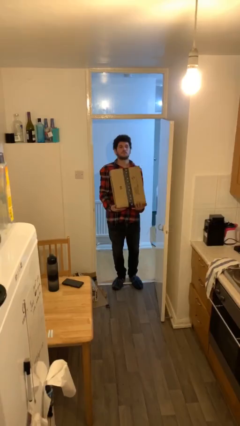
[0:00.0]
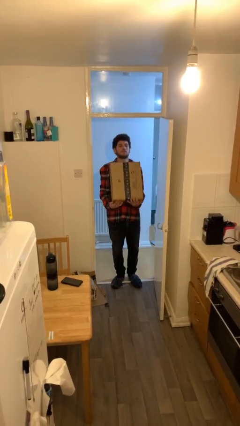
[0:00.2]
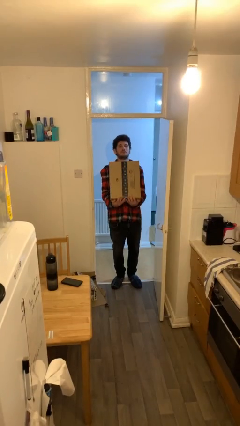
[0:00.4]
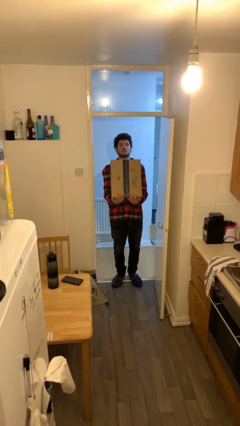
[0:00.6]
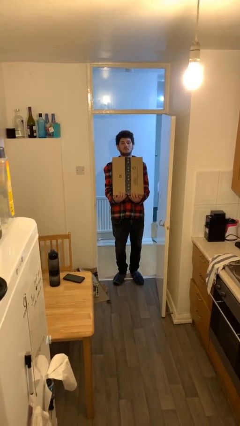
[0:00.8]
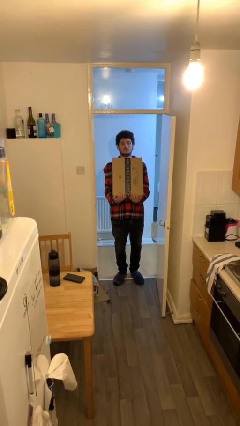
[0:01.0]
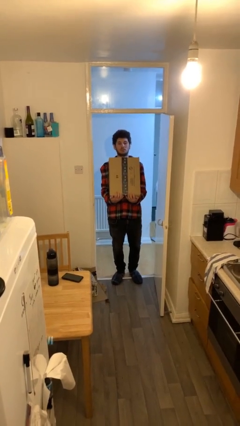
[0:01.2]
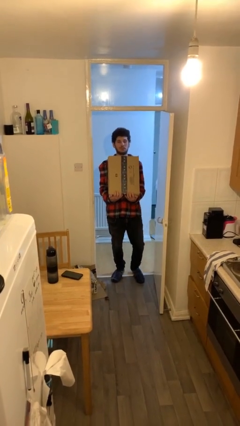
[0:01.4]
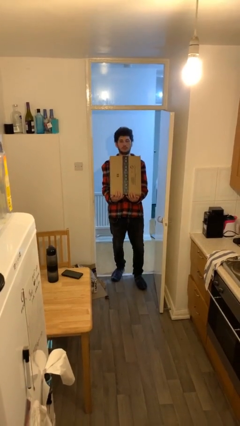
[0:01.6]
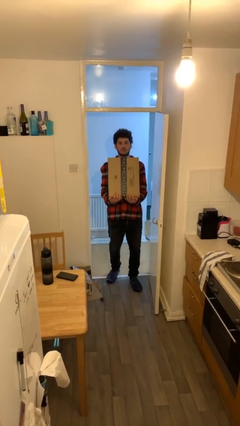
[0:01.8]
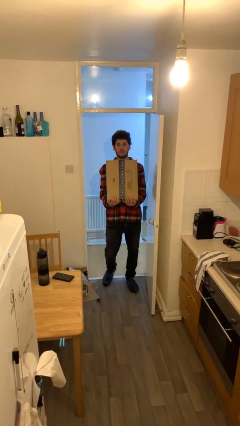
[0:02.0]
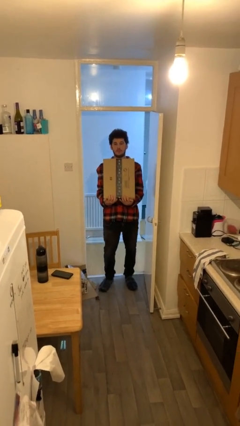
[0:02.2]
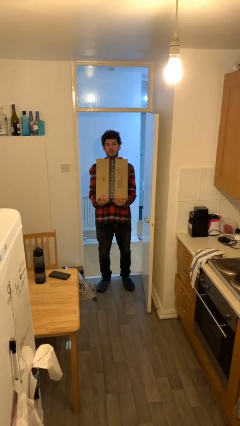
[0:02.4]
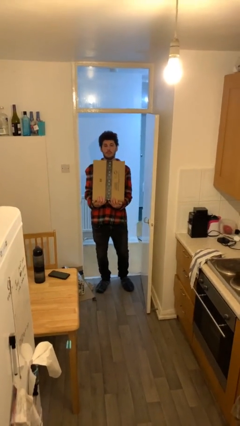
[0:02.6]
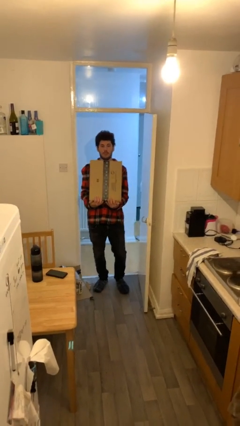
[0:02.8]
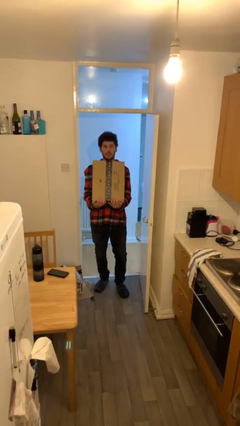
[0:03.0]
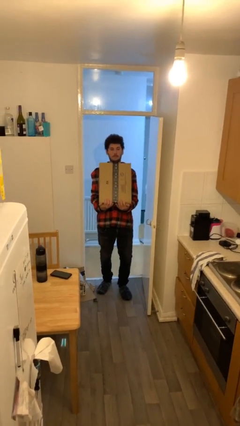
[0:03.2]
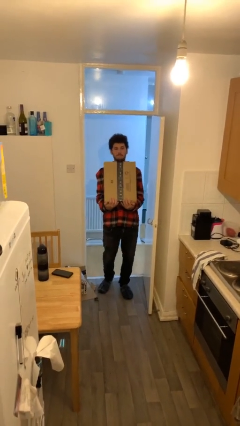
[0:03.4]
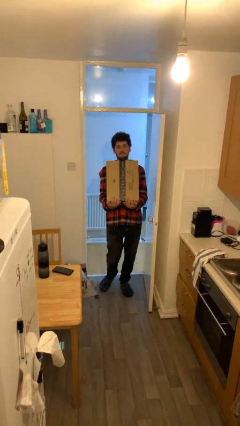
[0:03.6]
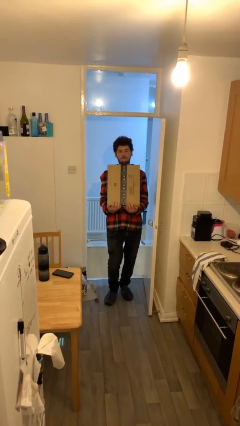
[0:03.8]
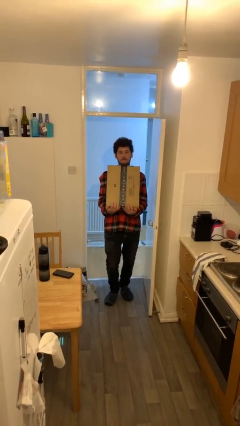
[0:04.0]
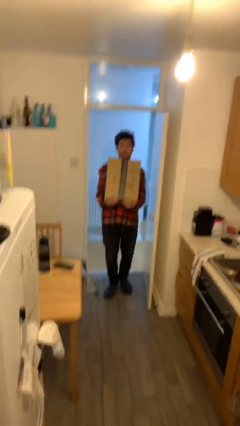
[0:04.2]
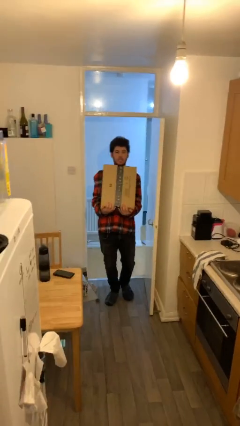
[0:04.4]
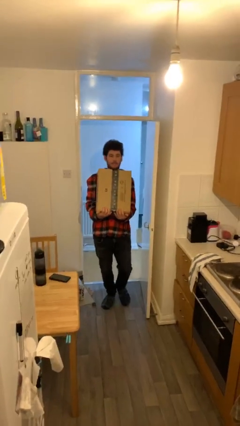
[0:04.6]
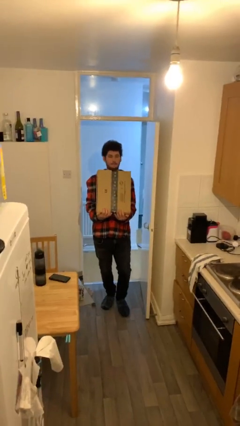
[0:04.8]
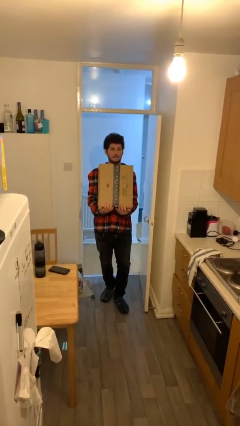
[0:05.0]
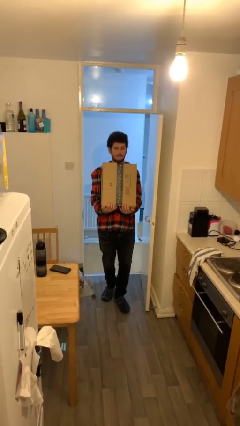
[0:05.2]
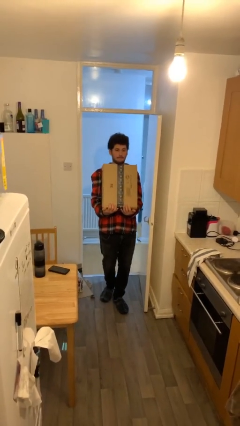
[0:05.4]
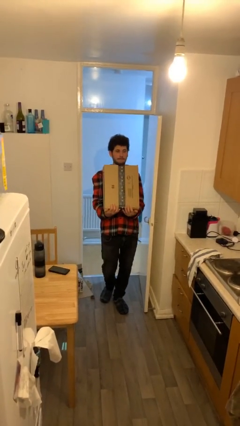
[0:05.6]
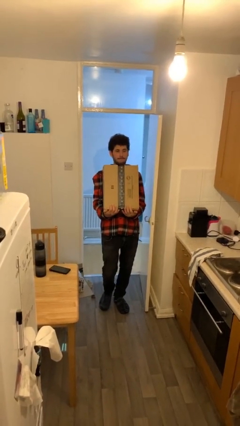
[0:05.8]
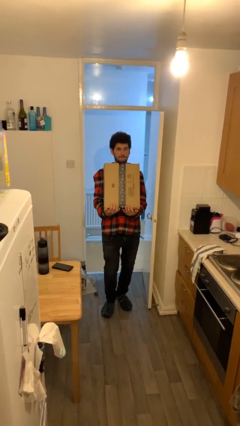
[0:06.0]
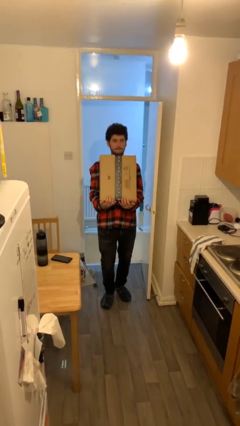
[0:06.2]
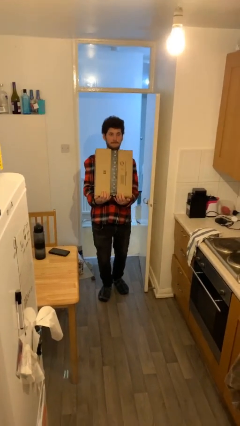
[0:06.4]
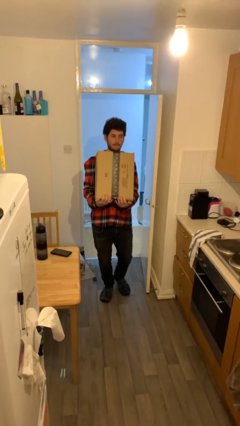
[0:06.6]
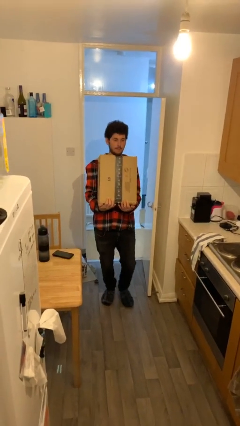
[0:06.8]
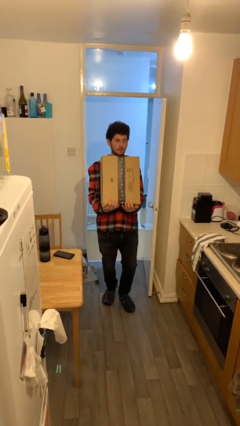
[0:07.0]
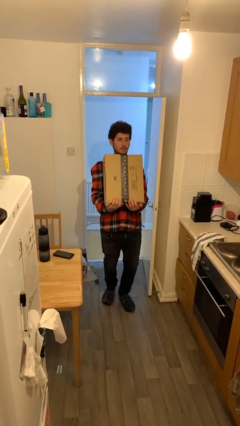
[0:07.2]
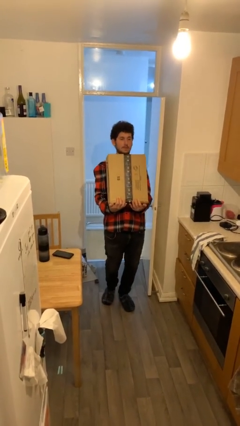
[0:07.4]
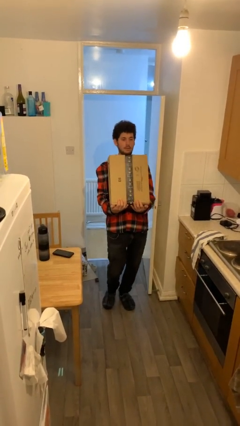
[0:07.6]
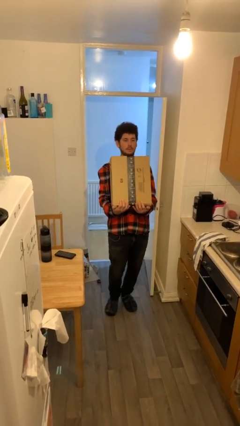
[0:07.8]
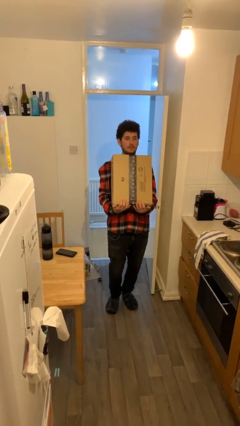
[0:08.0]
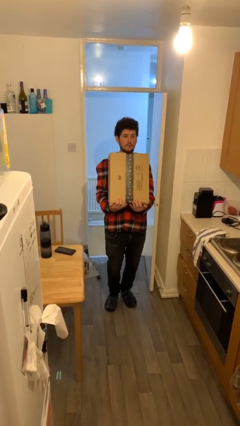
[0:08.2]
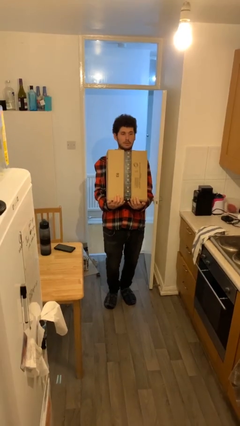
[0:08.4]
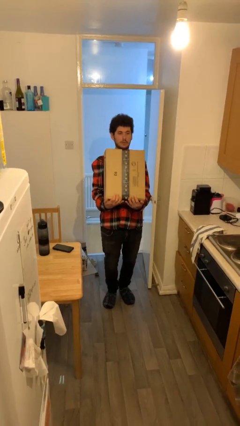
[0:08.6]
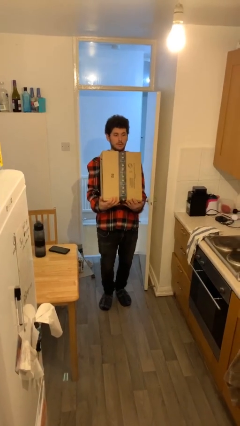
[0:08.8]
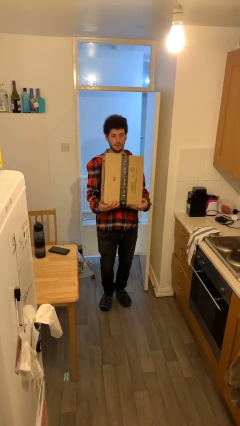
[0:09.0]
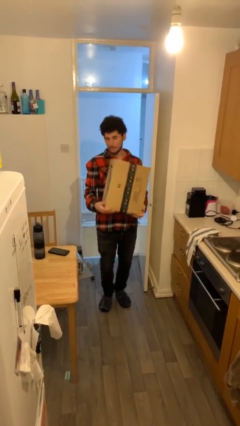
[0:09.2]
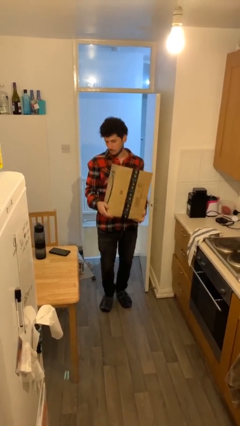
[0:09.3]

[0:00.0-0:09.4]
person carries heavy object

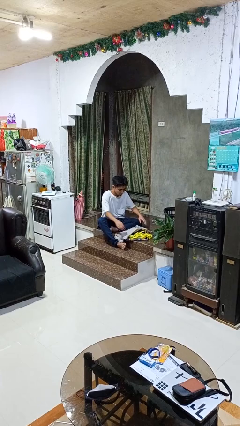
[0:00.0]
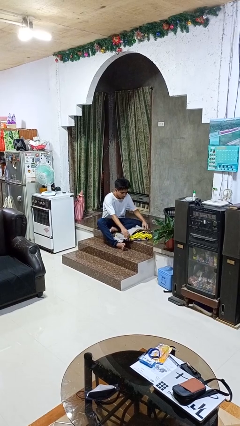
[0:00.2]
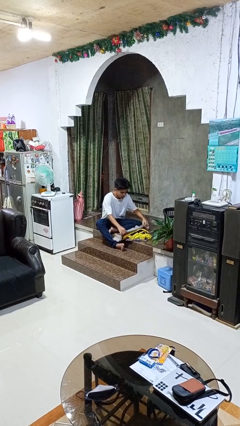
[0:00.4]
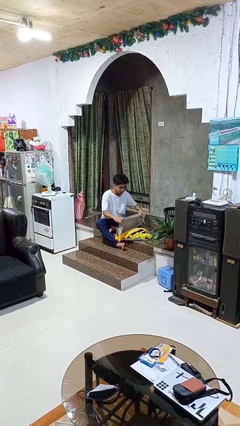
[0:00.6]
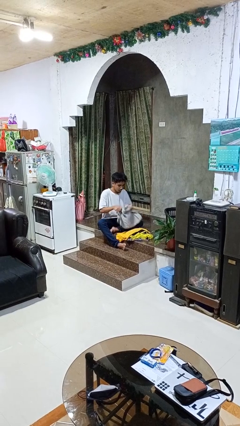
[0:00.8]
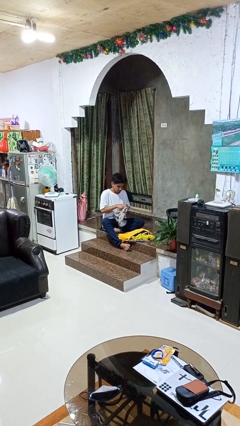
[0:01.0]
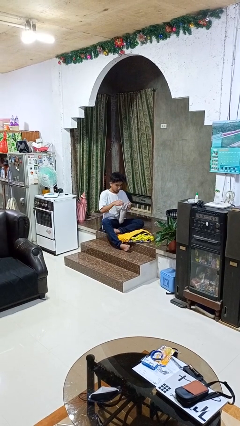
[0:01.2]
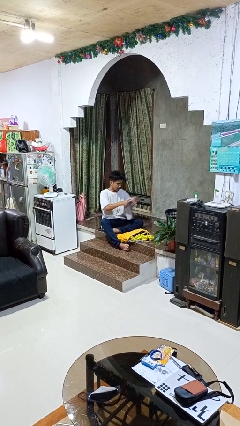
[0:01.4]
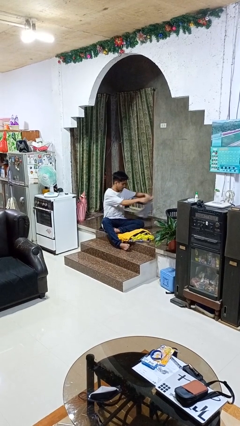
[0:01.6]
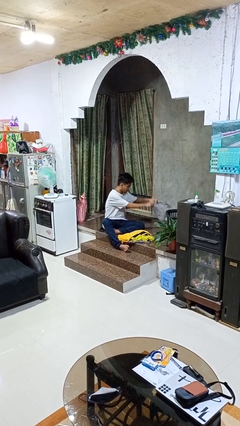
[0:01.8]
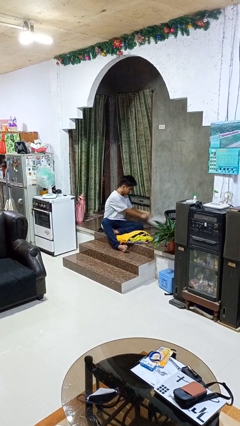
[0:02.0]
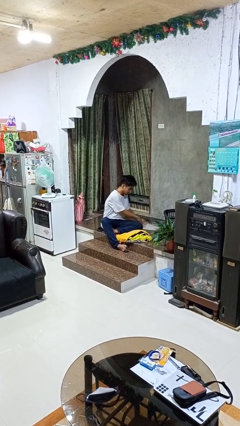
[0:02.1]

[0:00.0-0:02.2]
person folds shirt

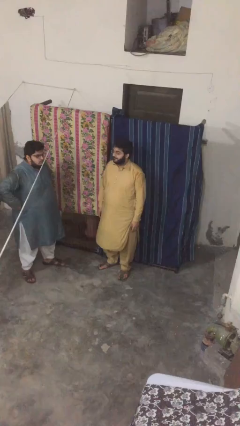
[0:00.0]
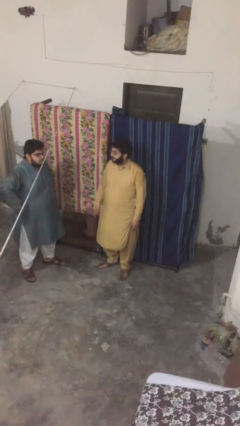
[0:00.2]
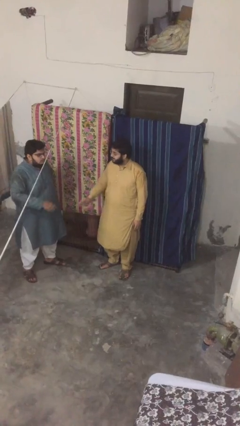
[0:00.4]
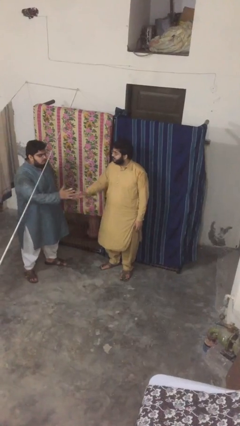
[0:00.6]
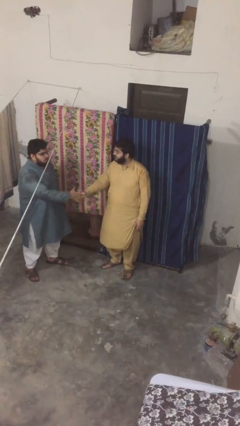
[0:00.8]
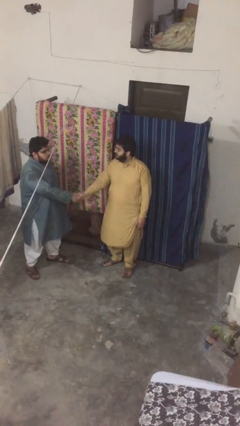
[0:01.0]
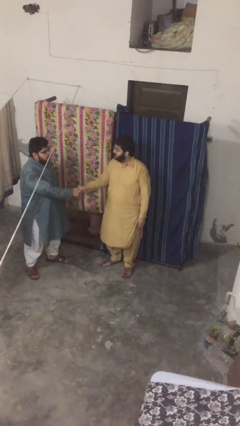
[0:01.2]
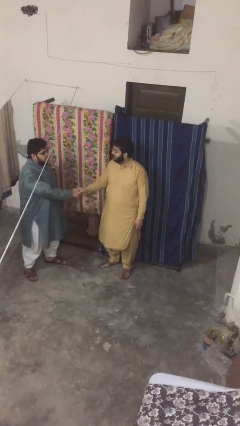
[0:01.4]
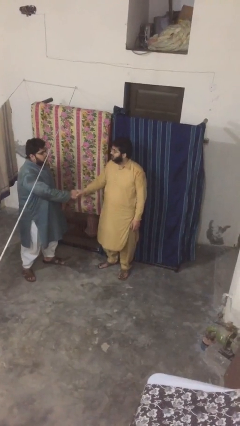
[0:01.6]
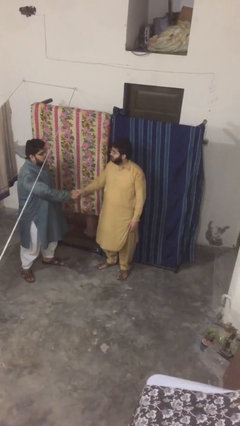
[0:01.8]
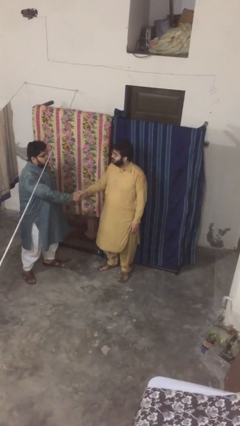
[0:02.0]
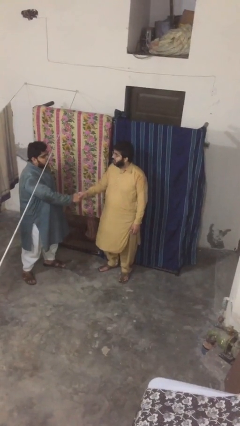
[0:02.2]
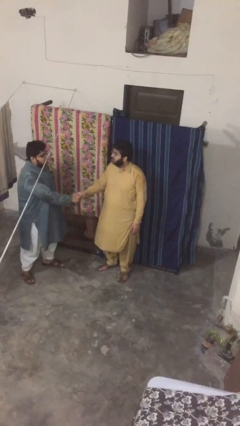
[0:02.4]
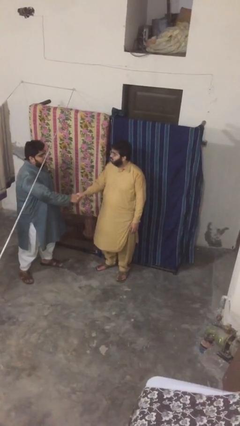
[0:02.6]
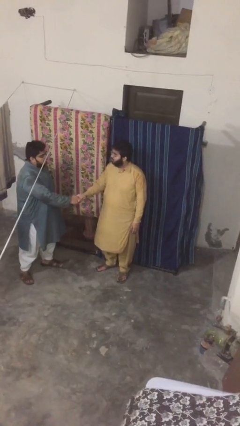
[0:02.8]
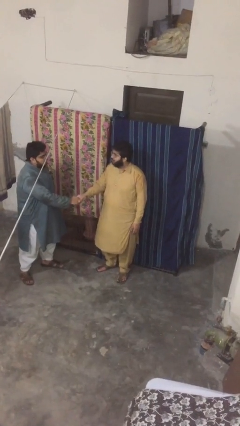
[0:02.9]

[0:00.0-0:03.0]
person shakes hand

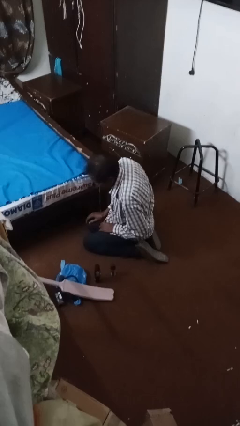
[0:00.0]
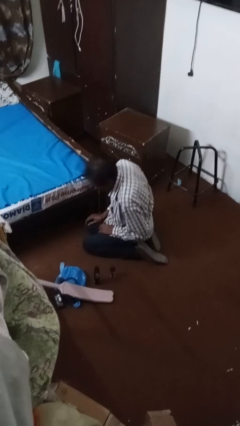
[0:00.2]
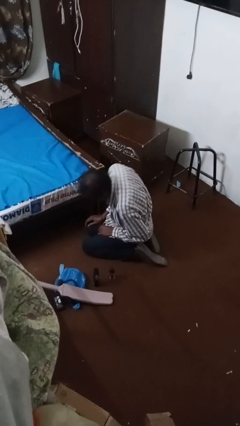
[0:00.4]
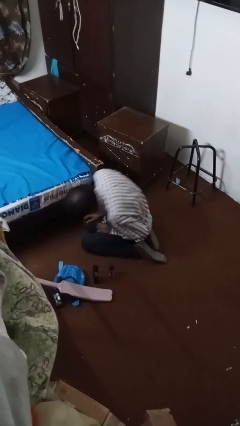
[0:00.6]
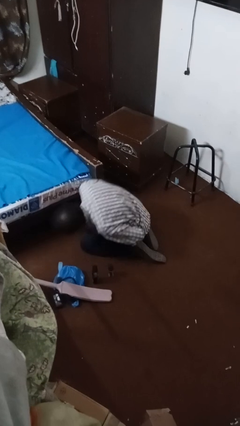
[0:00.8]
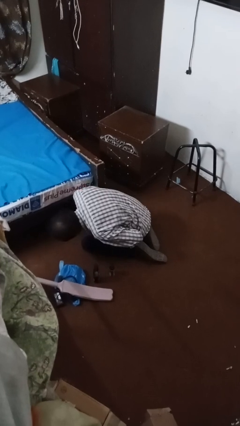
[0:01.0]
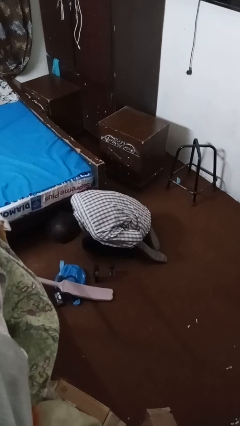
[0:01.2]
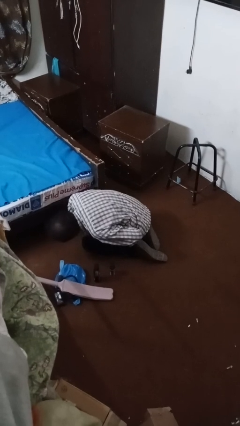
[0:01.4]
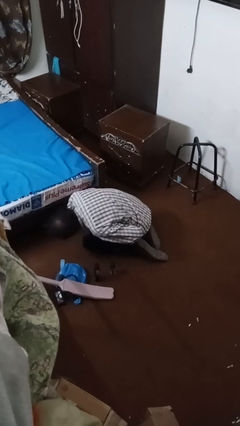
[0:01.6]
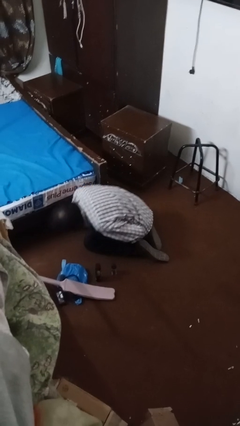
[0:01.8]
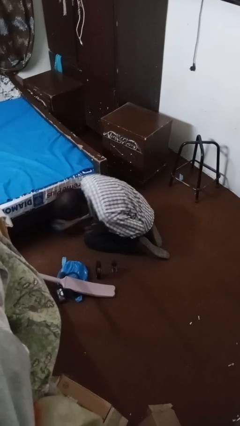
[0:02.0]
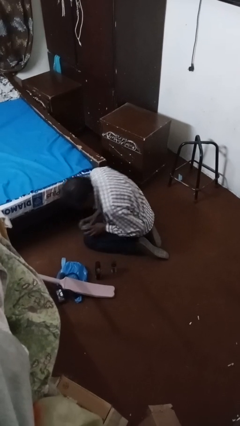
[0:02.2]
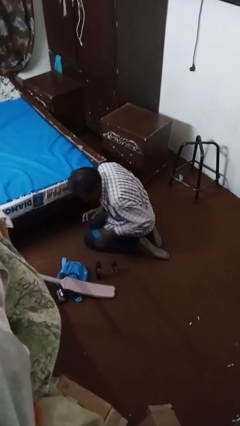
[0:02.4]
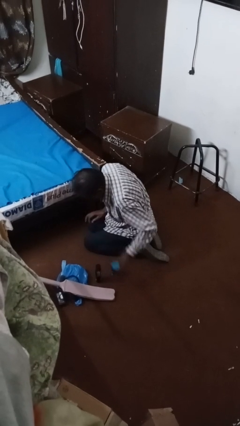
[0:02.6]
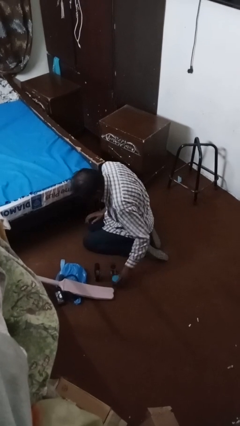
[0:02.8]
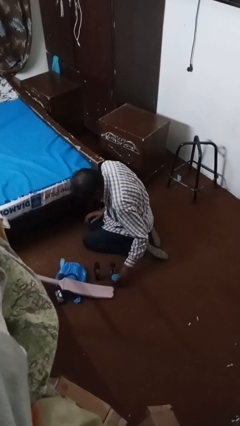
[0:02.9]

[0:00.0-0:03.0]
person searches under bed
